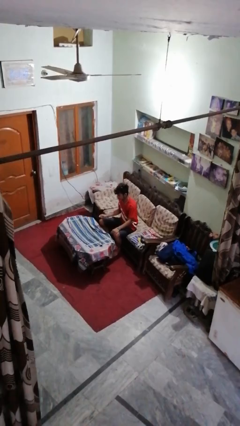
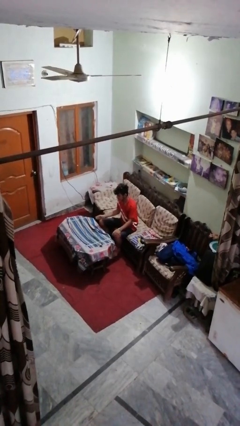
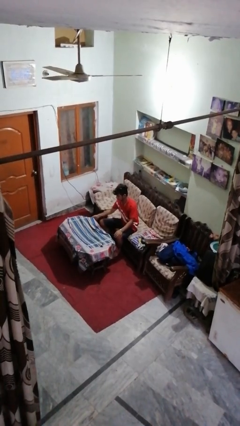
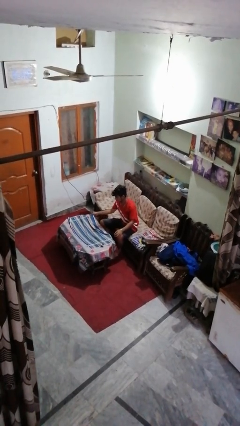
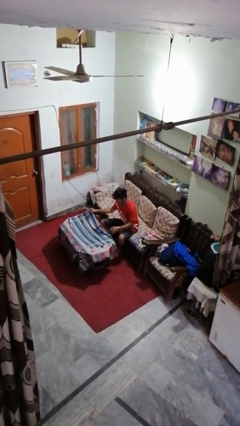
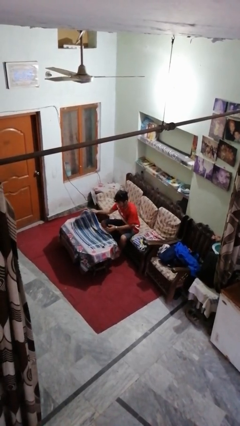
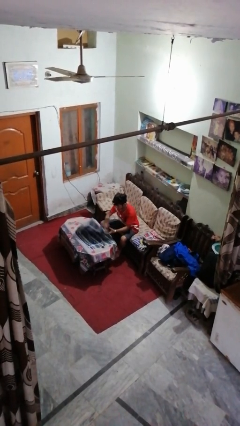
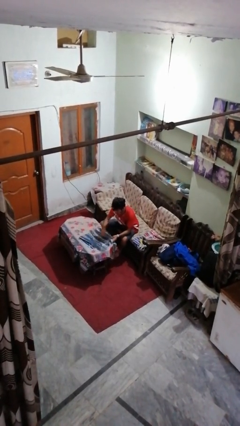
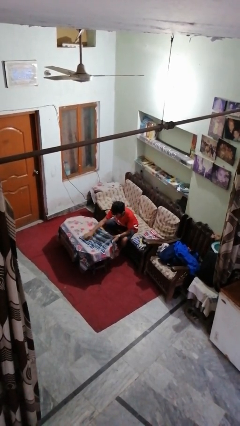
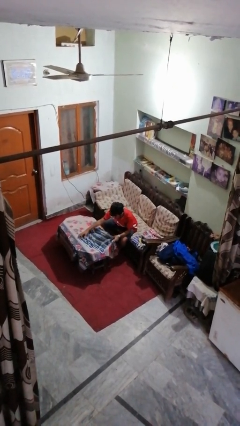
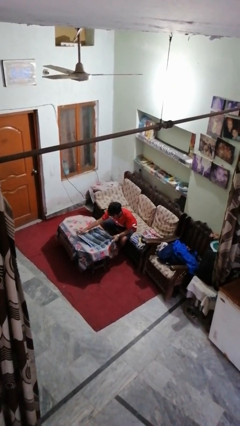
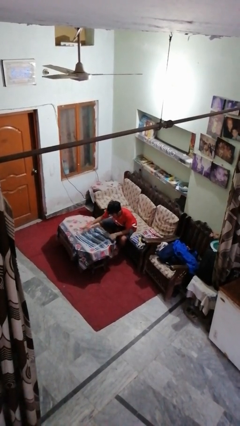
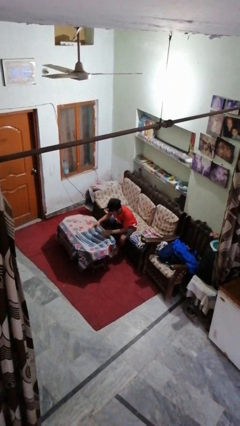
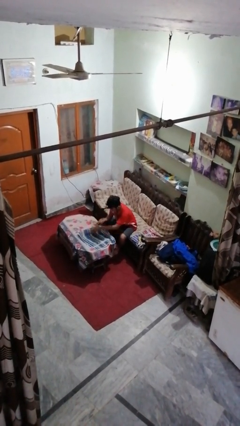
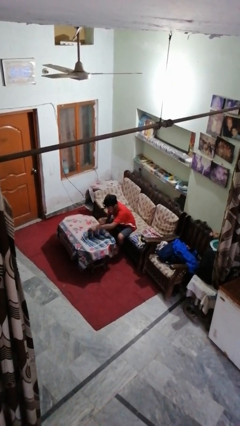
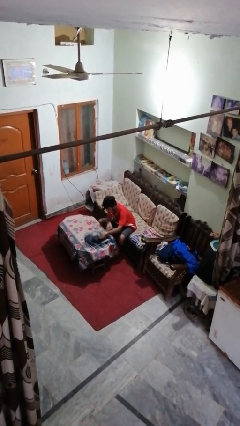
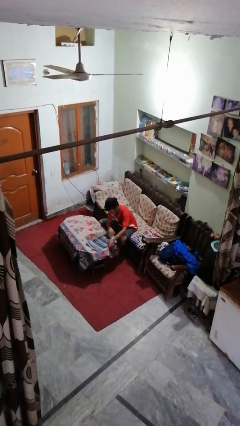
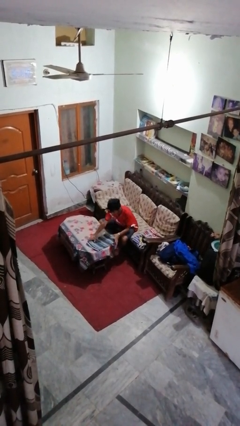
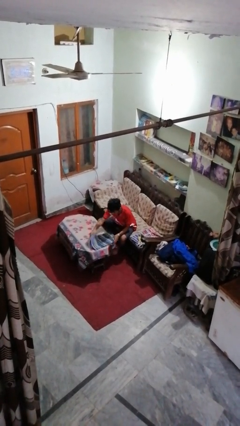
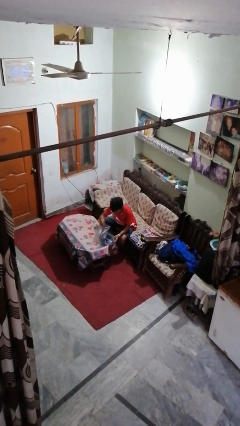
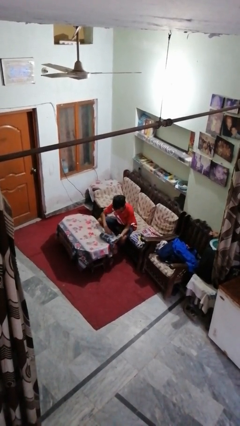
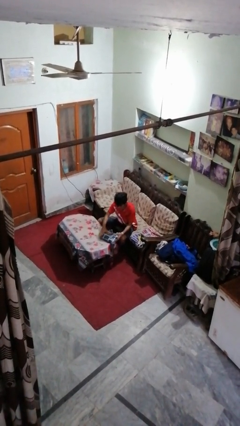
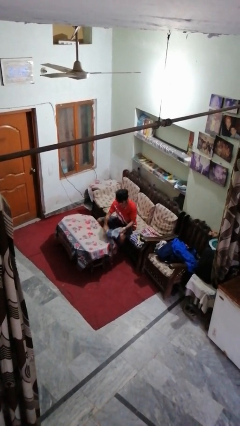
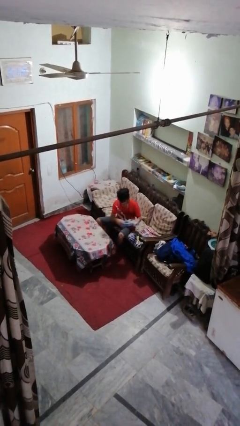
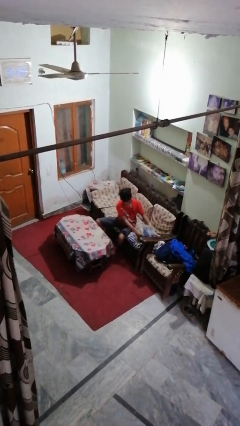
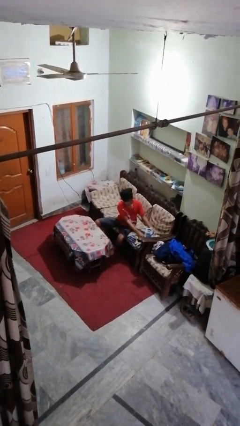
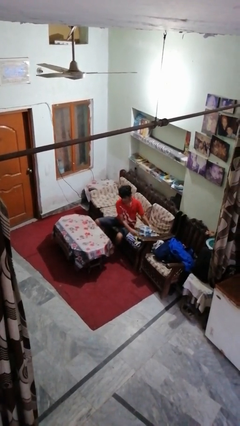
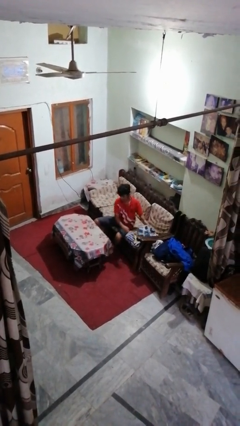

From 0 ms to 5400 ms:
person folds towel

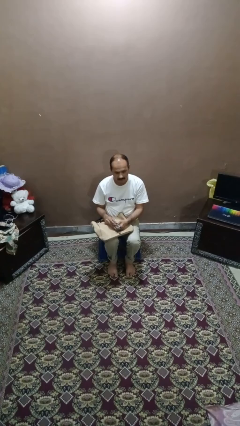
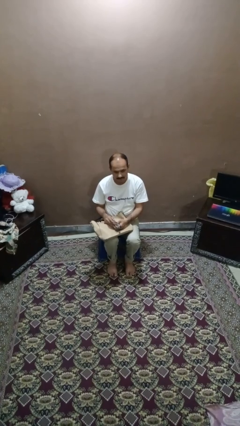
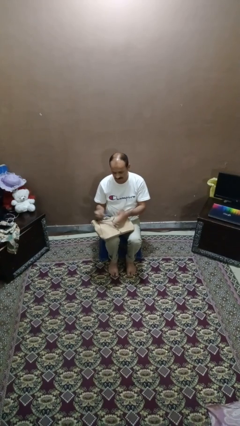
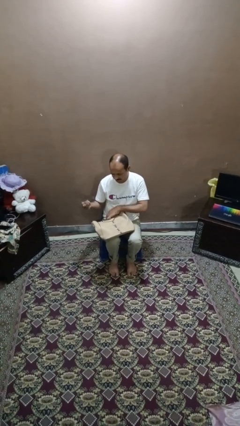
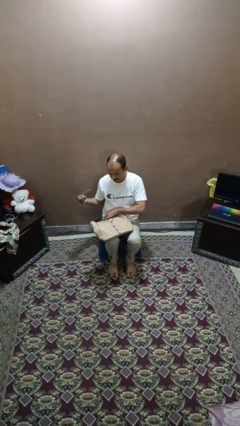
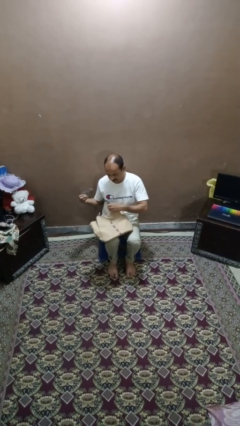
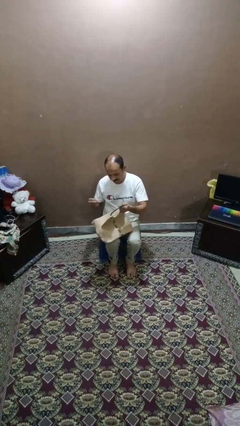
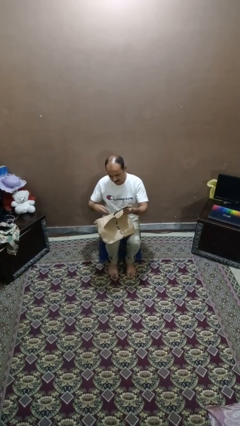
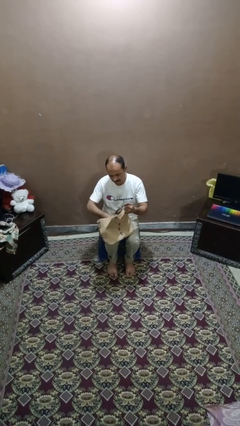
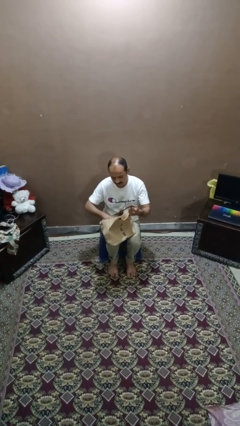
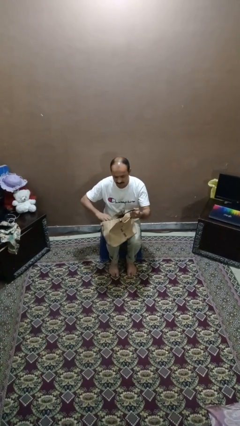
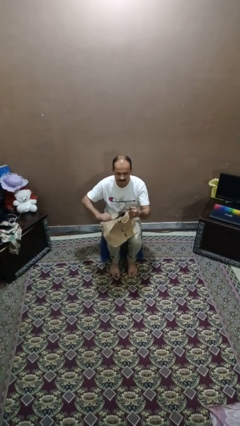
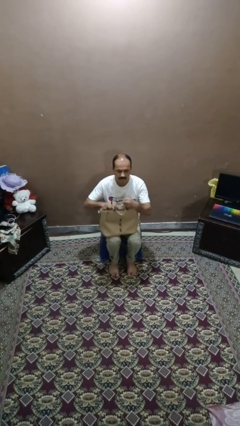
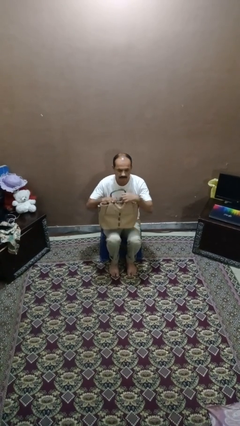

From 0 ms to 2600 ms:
person puts object into purse

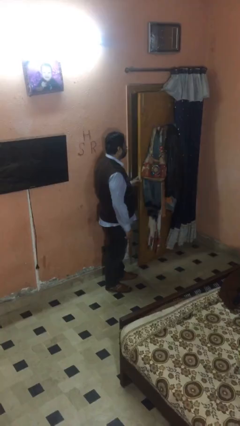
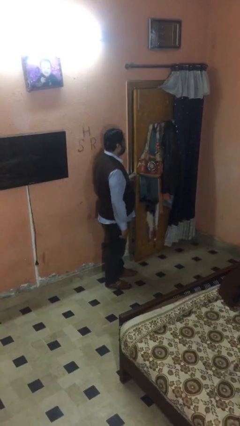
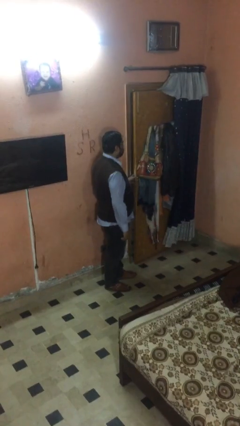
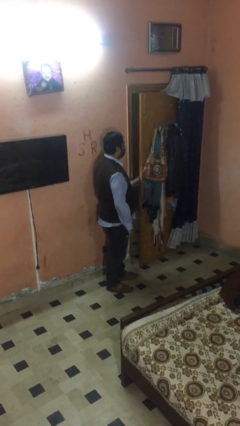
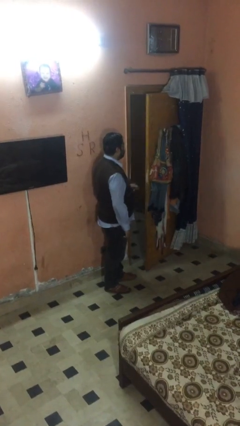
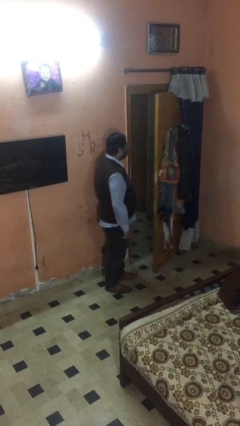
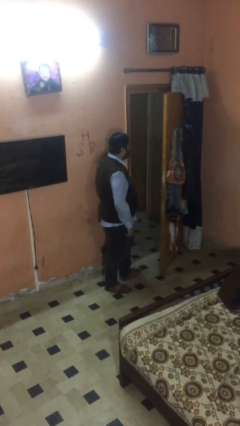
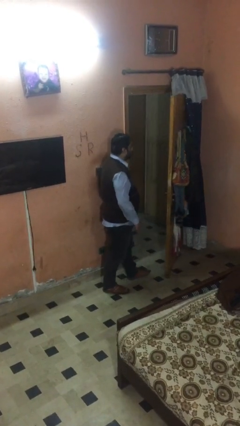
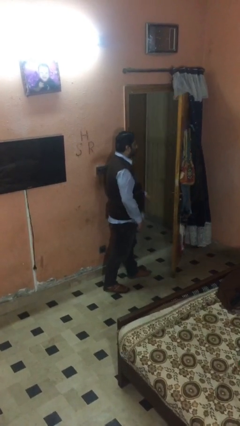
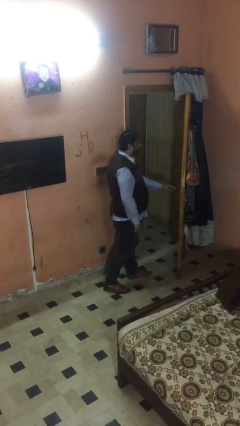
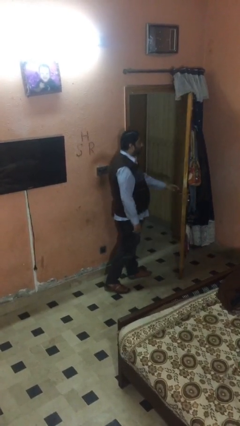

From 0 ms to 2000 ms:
person opens facility door

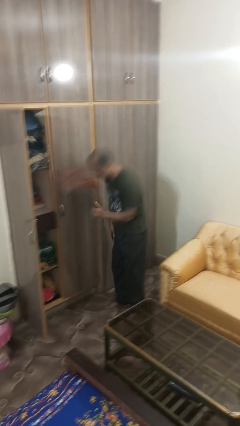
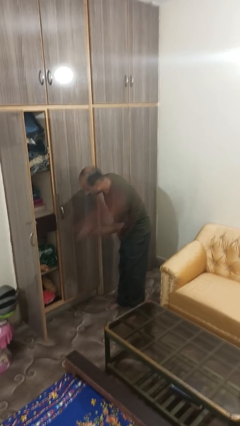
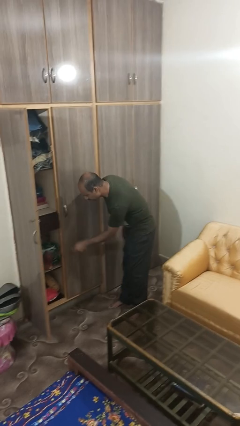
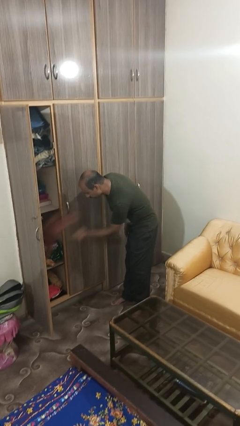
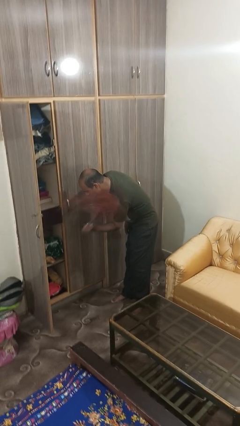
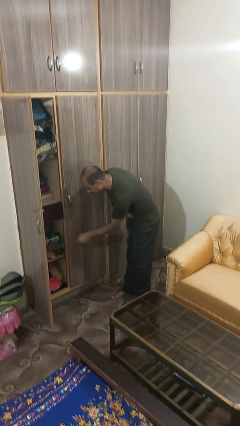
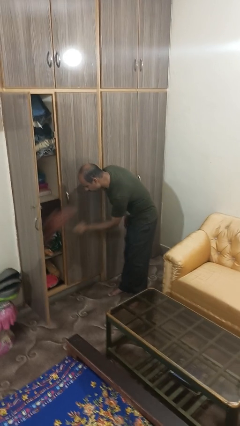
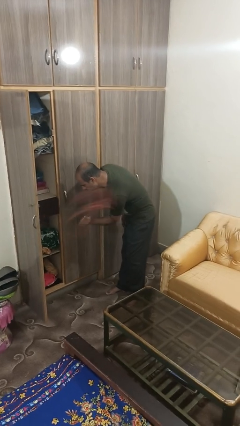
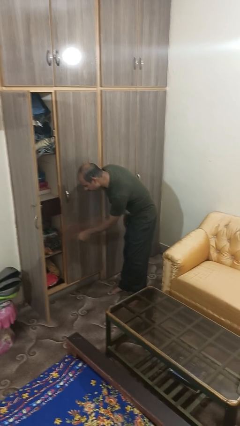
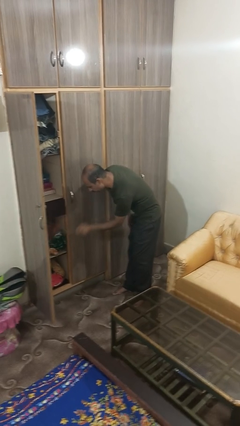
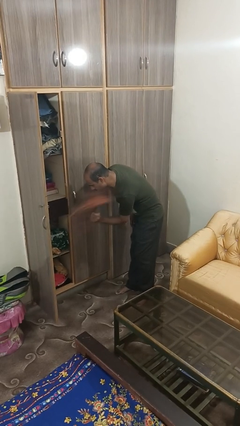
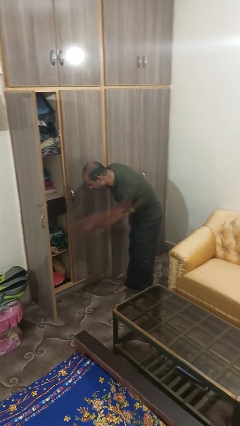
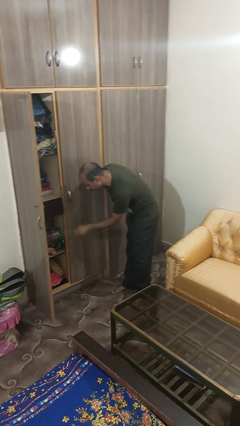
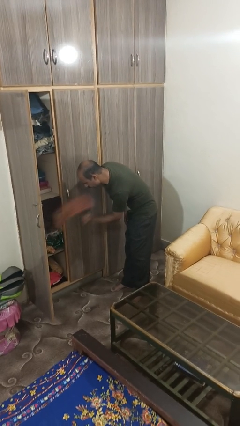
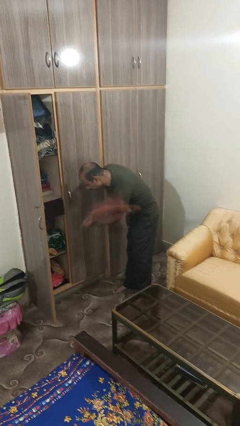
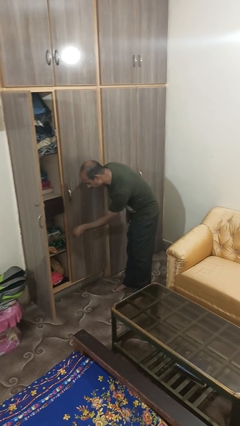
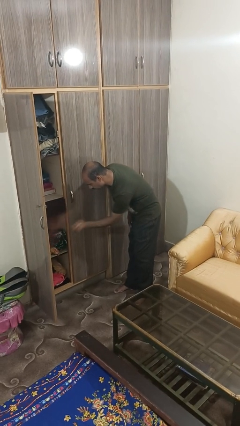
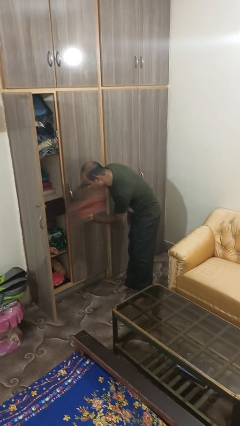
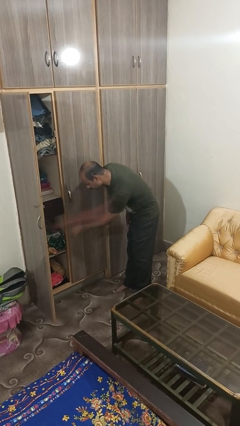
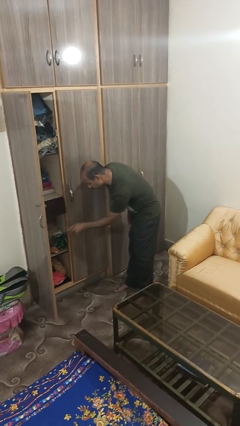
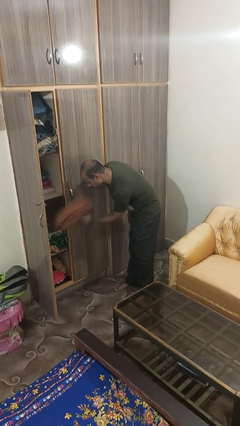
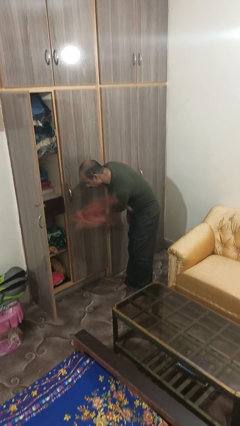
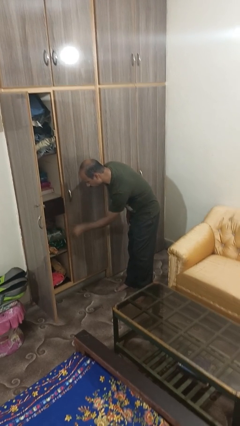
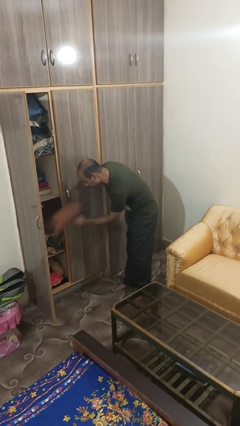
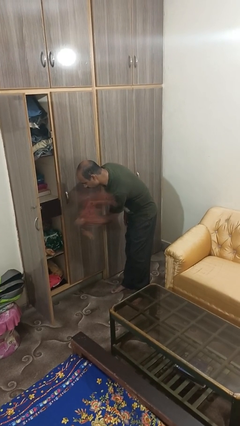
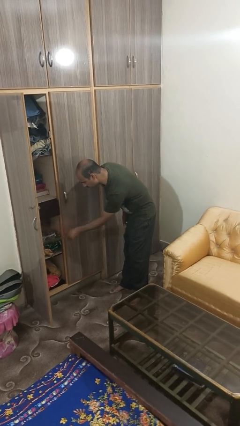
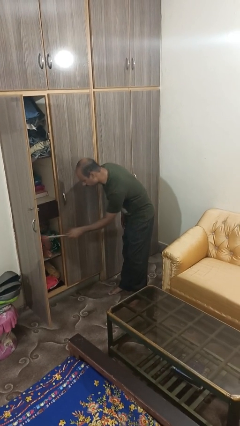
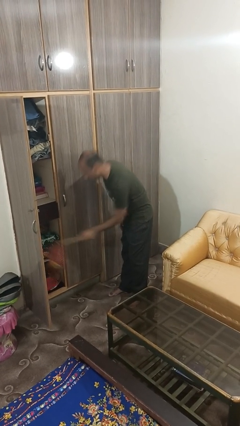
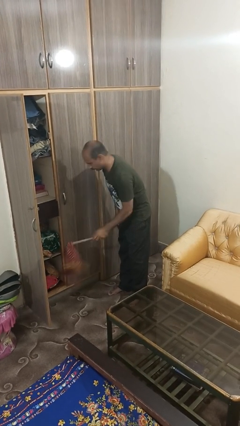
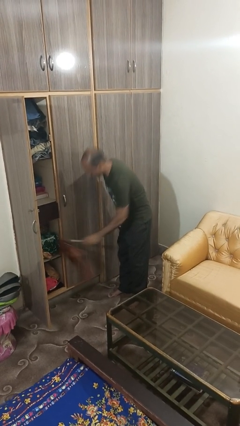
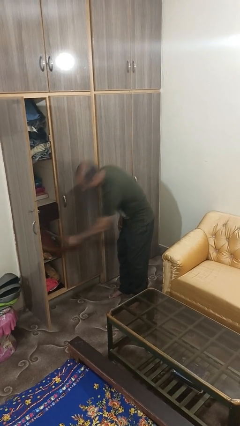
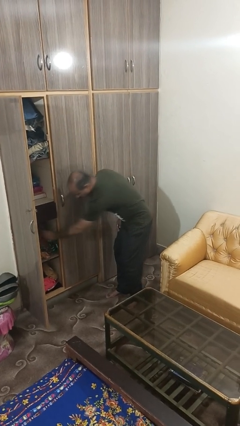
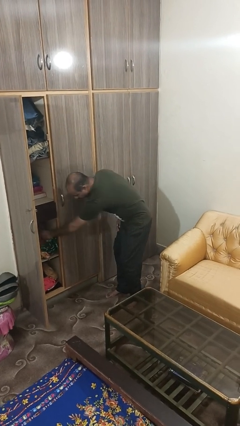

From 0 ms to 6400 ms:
person dusts furniture

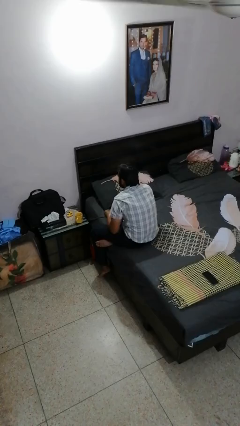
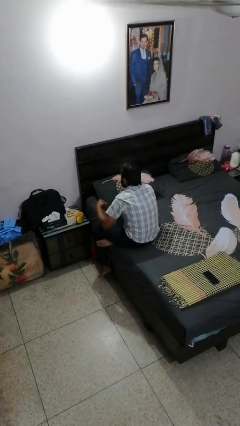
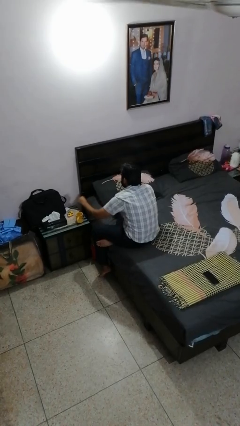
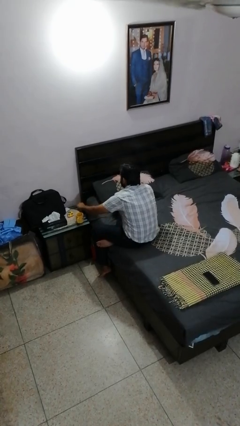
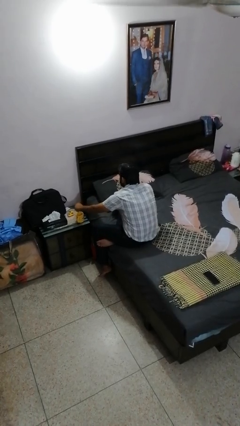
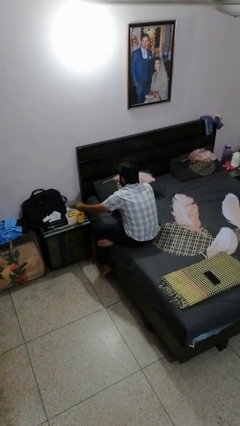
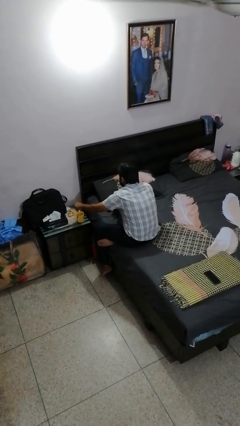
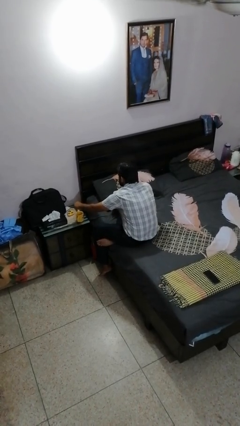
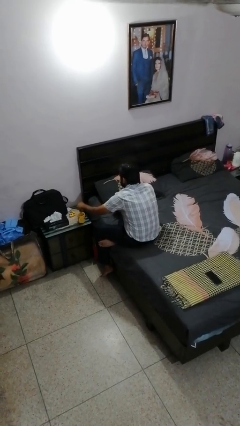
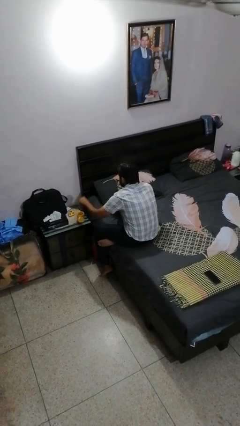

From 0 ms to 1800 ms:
person stirs mug
